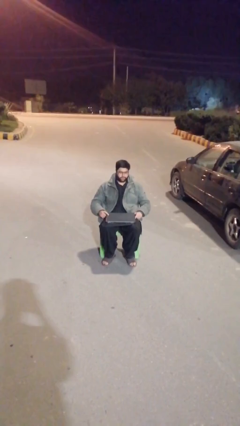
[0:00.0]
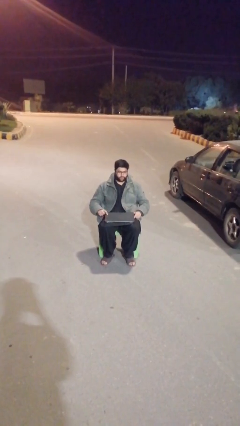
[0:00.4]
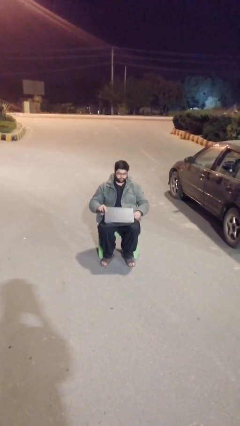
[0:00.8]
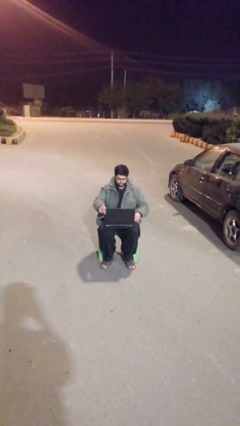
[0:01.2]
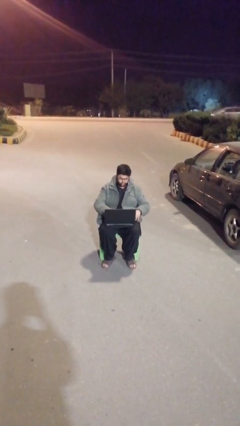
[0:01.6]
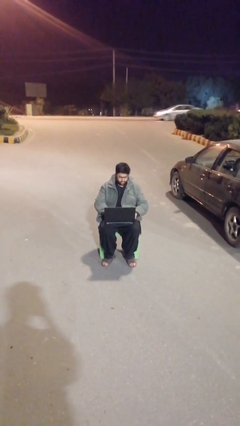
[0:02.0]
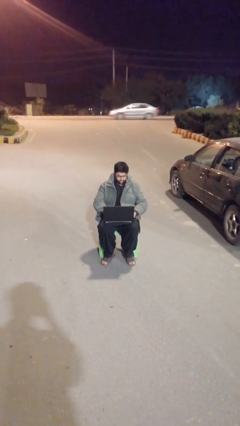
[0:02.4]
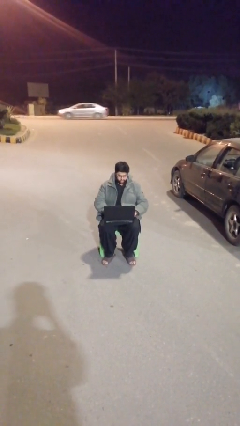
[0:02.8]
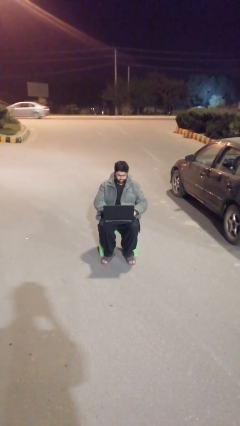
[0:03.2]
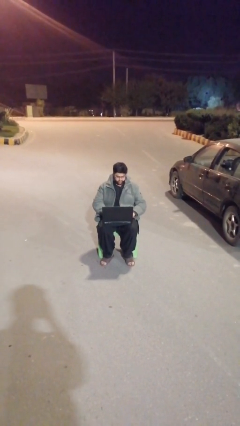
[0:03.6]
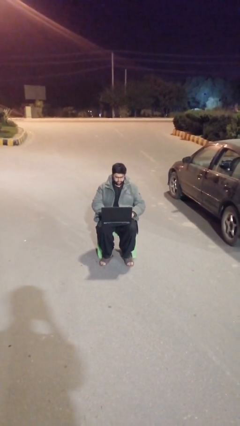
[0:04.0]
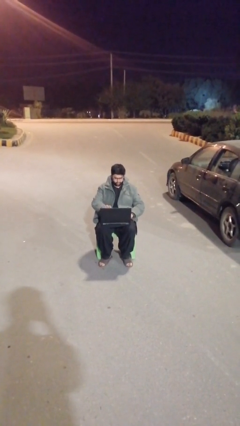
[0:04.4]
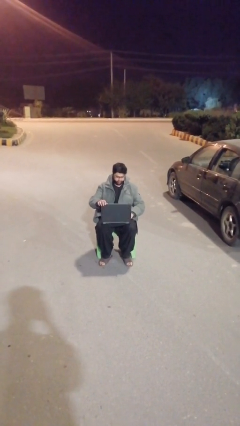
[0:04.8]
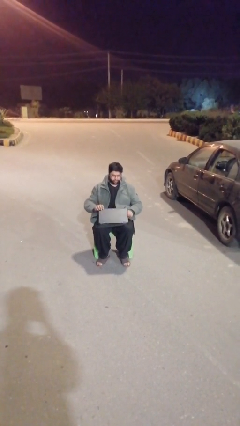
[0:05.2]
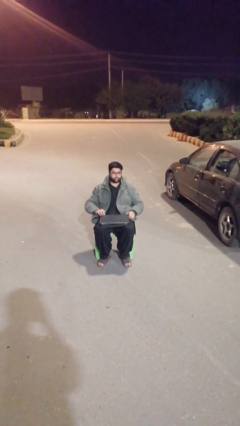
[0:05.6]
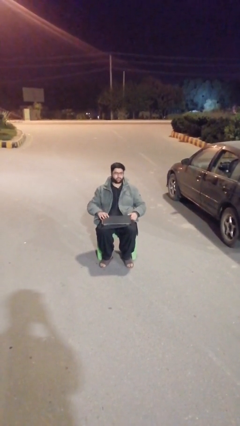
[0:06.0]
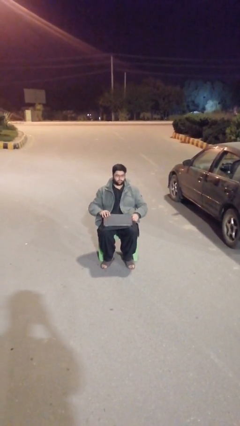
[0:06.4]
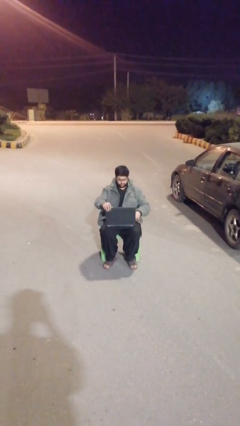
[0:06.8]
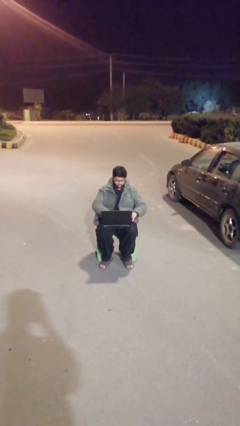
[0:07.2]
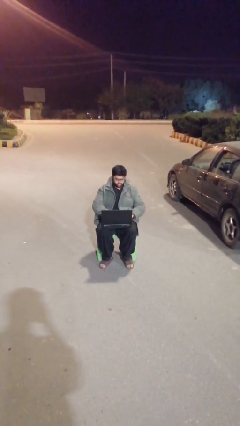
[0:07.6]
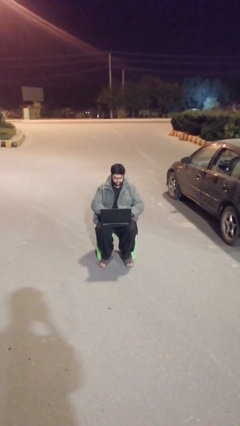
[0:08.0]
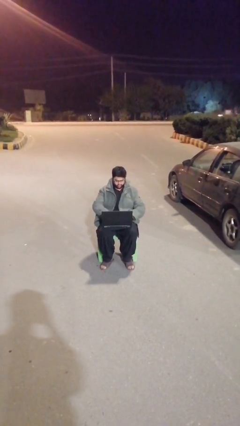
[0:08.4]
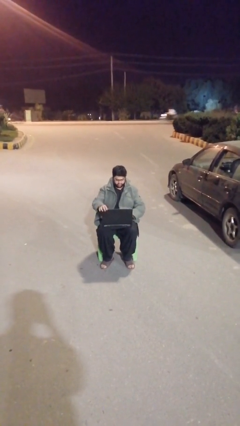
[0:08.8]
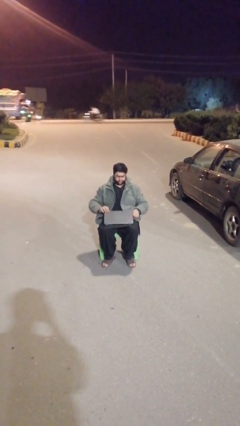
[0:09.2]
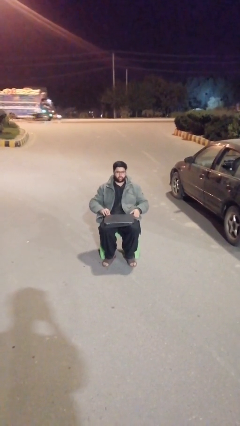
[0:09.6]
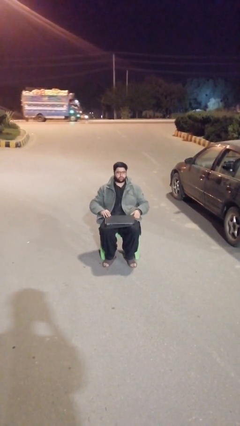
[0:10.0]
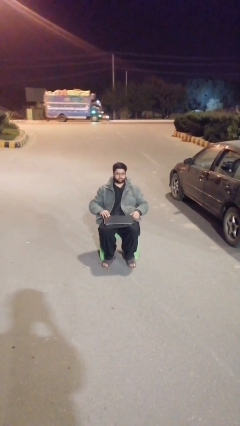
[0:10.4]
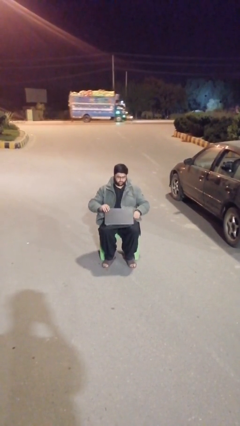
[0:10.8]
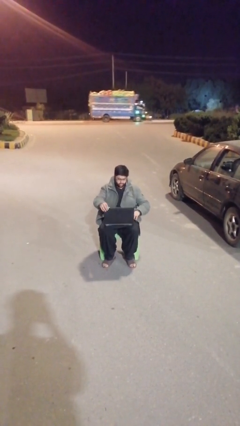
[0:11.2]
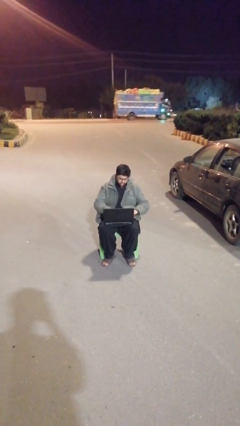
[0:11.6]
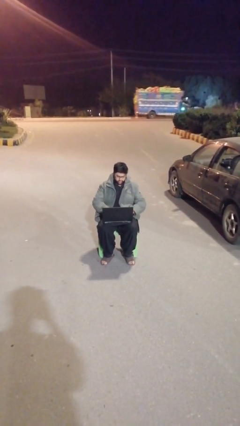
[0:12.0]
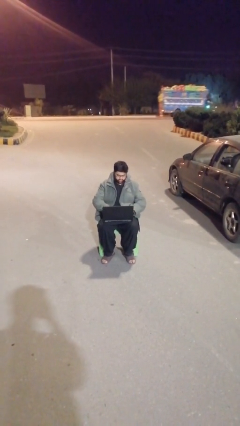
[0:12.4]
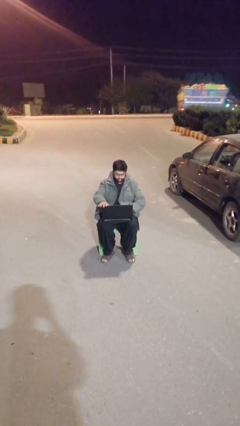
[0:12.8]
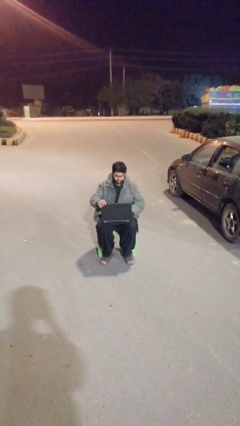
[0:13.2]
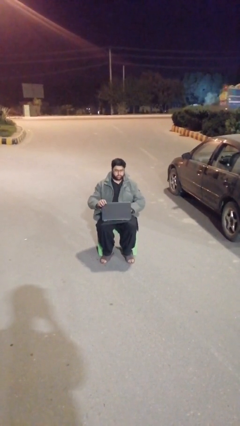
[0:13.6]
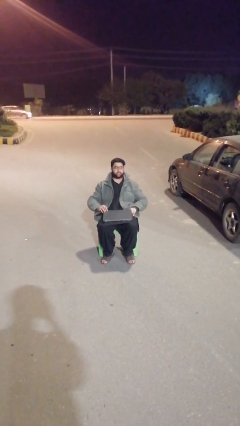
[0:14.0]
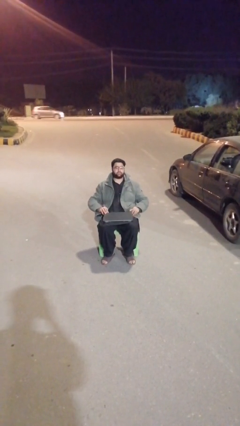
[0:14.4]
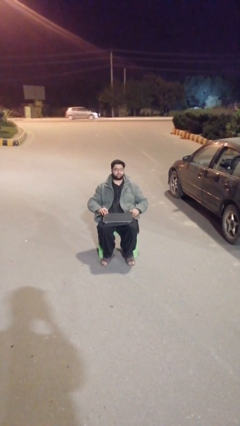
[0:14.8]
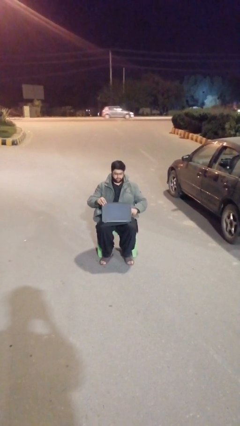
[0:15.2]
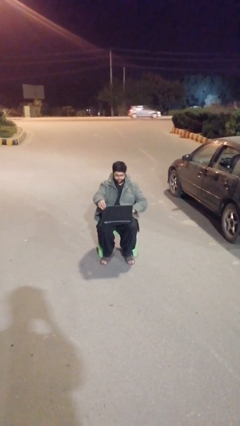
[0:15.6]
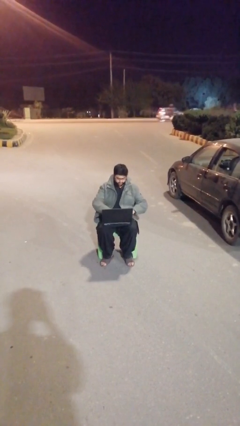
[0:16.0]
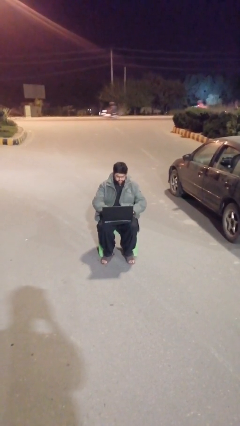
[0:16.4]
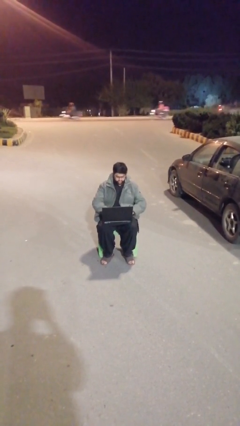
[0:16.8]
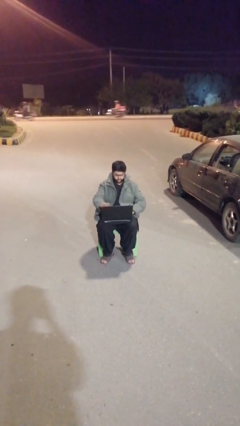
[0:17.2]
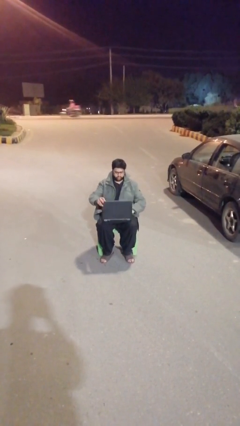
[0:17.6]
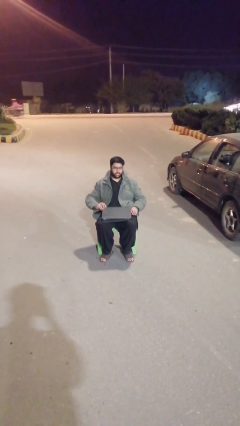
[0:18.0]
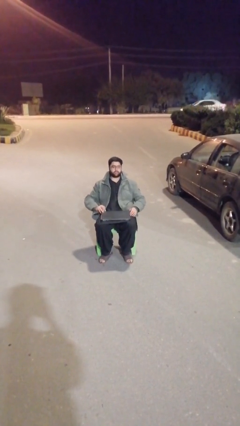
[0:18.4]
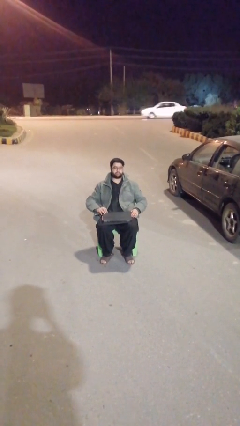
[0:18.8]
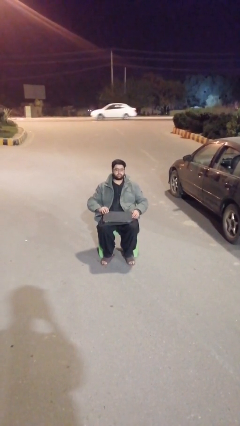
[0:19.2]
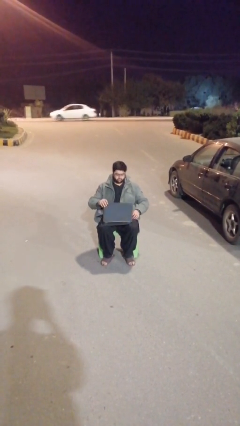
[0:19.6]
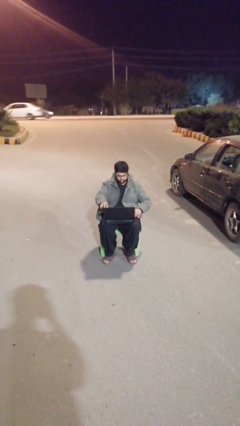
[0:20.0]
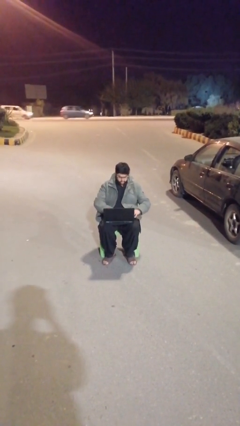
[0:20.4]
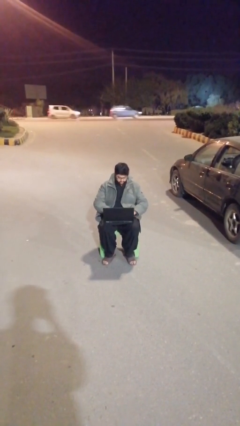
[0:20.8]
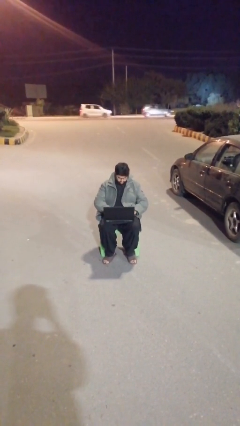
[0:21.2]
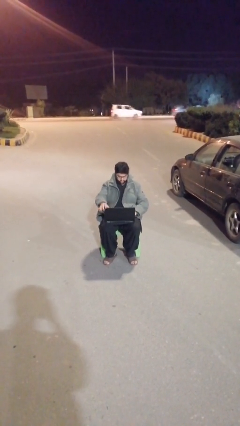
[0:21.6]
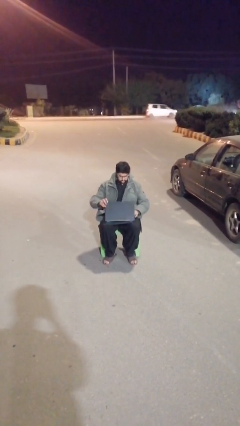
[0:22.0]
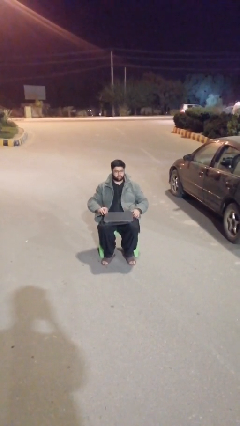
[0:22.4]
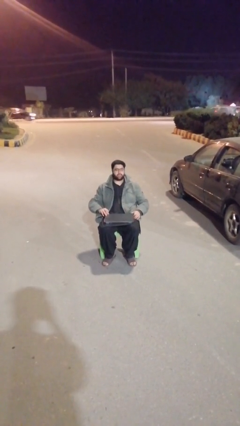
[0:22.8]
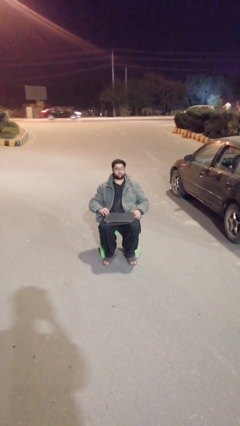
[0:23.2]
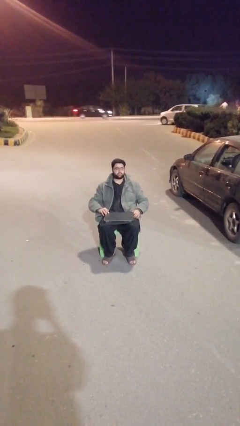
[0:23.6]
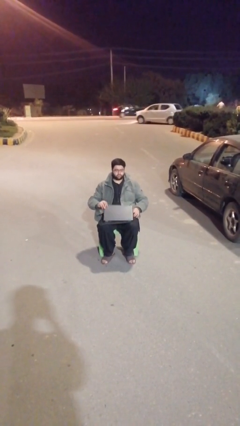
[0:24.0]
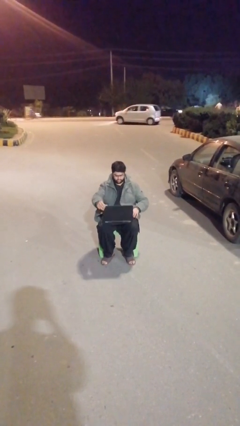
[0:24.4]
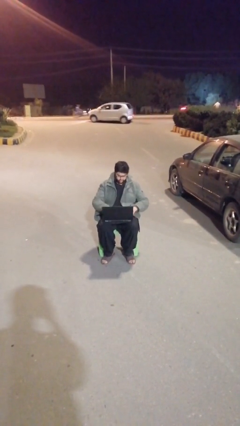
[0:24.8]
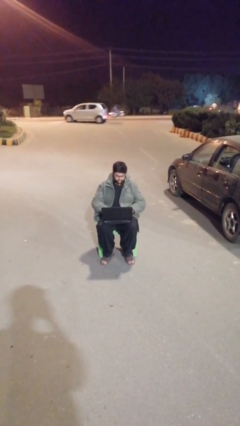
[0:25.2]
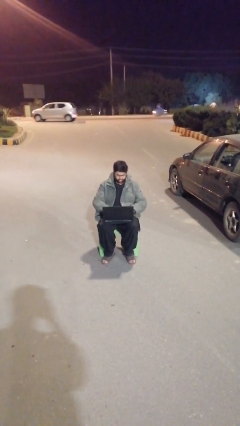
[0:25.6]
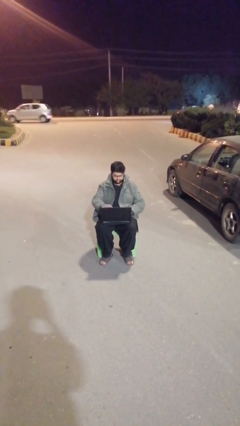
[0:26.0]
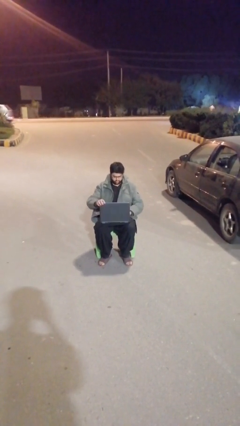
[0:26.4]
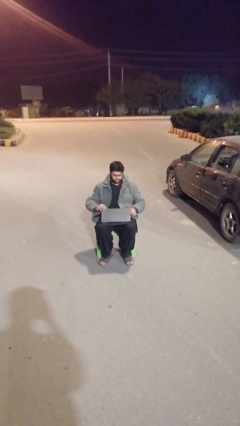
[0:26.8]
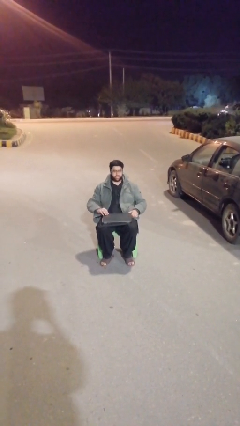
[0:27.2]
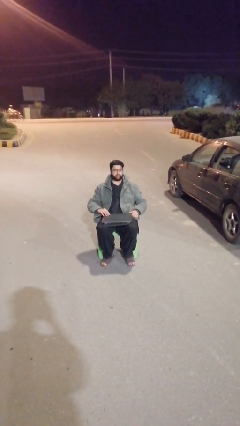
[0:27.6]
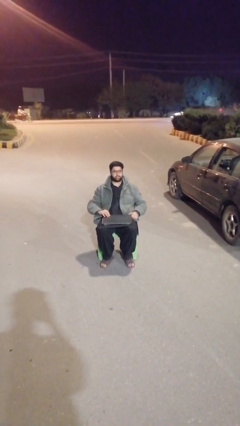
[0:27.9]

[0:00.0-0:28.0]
person interacts with laptop

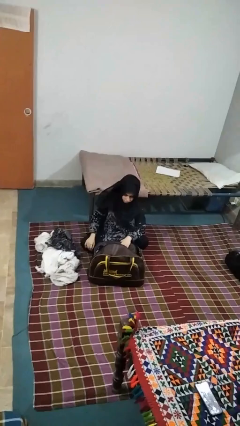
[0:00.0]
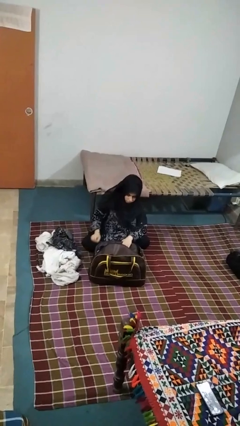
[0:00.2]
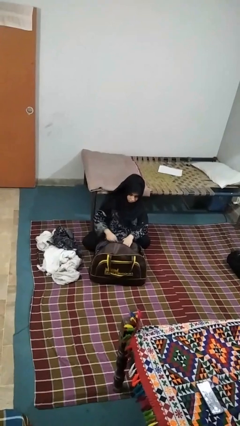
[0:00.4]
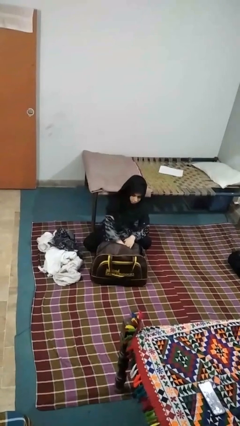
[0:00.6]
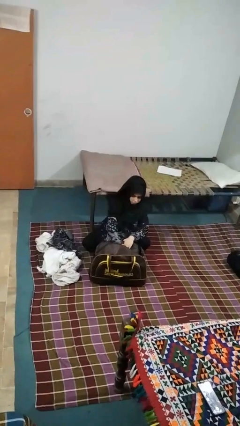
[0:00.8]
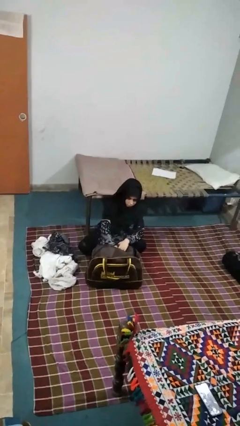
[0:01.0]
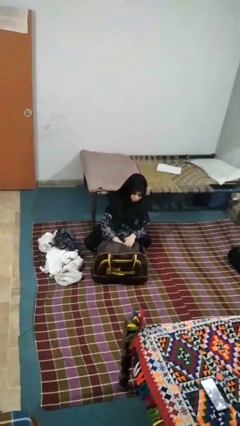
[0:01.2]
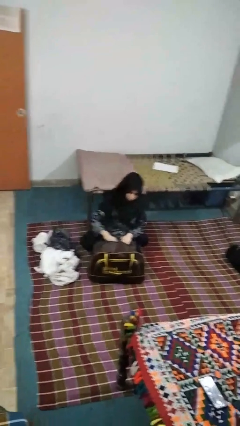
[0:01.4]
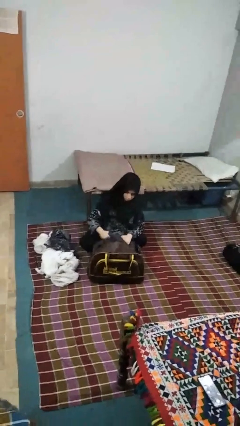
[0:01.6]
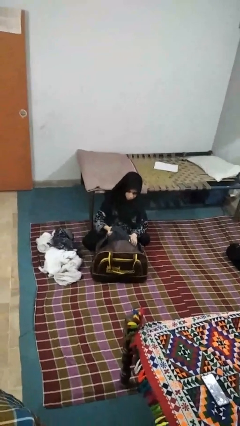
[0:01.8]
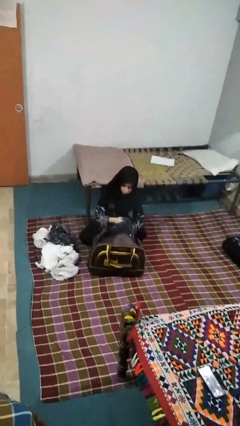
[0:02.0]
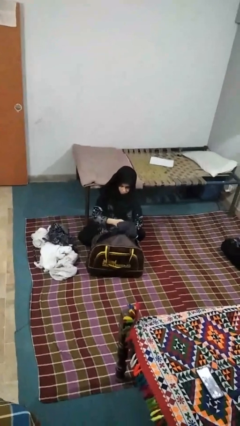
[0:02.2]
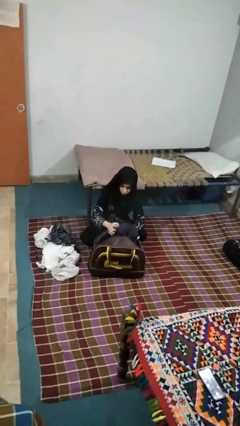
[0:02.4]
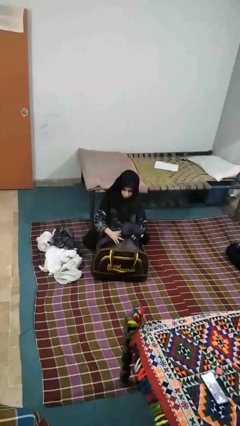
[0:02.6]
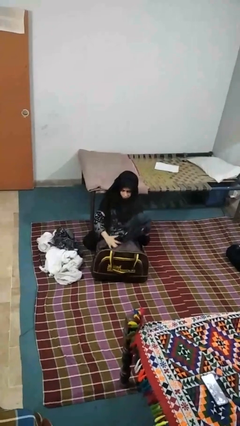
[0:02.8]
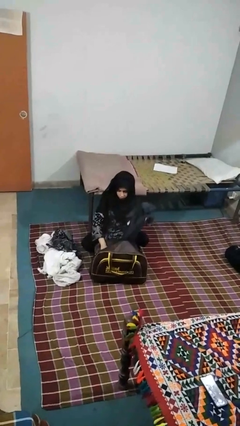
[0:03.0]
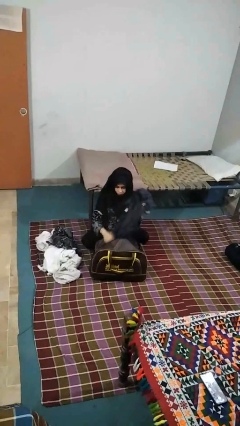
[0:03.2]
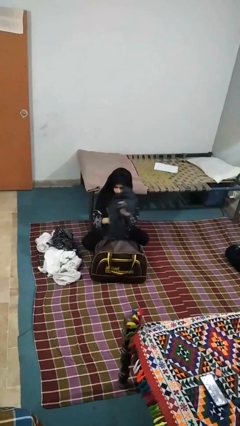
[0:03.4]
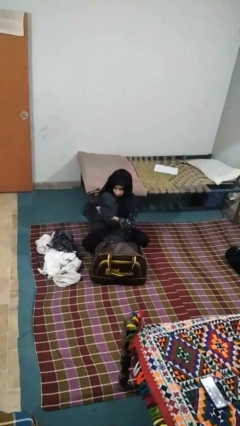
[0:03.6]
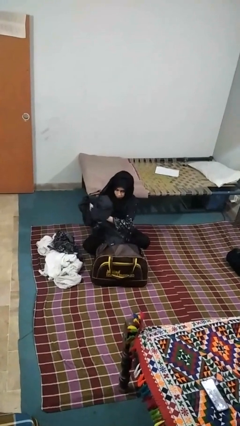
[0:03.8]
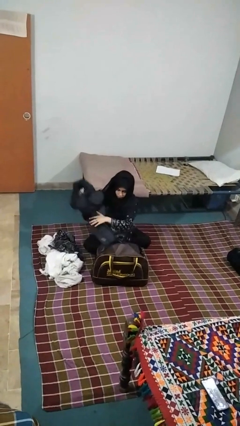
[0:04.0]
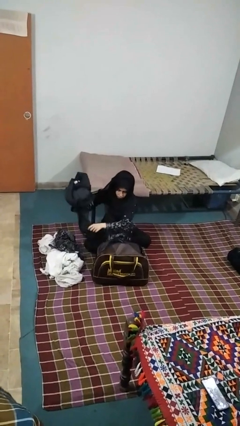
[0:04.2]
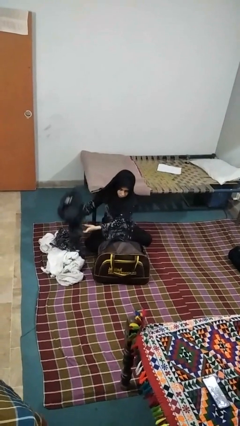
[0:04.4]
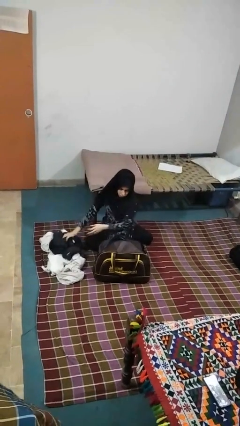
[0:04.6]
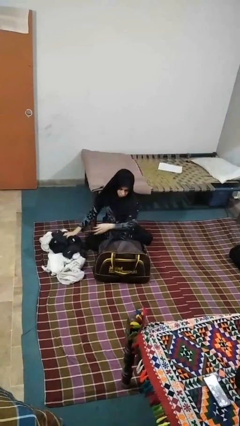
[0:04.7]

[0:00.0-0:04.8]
person unloads clothes from suitcase
